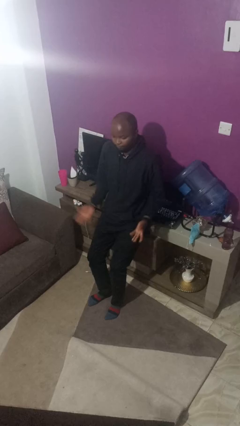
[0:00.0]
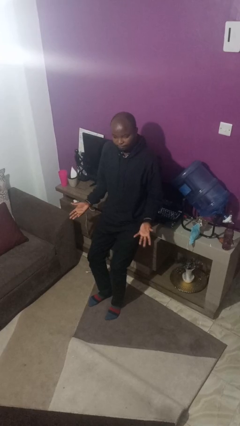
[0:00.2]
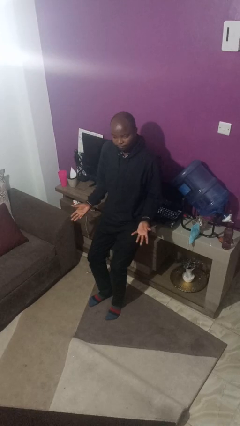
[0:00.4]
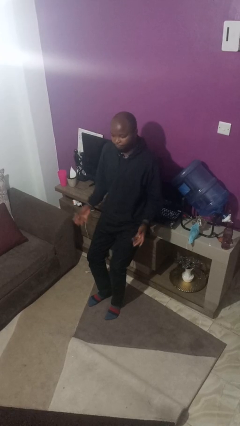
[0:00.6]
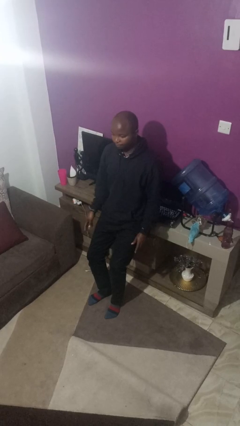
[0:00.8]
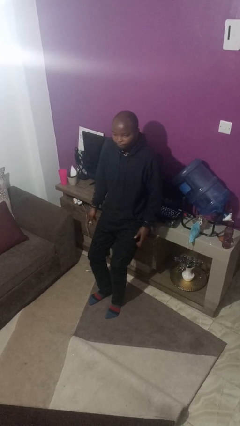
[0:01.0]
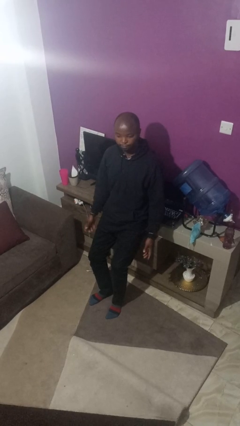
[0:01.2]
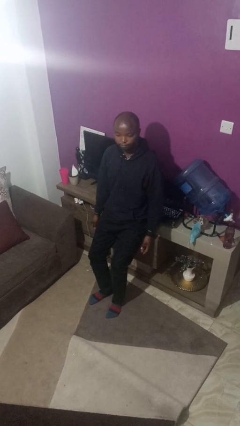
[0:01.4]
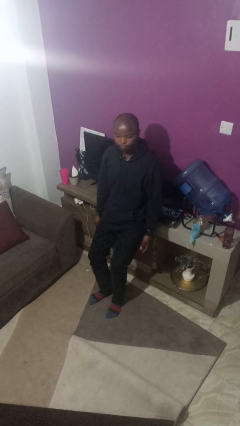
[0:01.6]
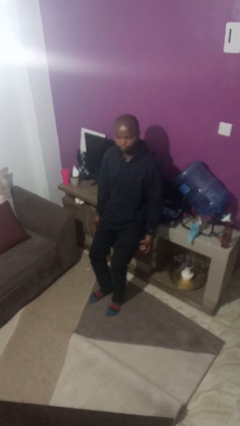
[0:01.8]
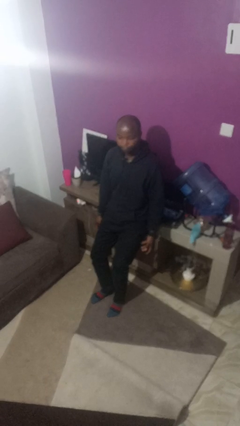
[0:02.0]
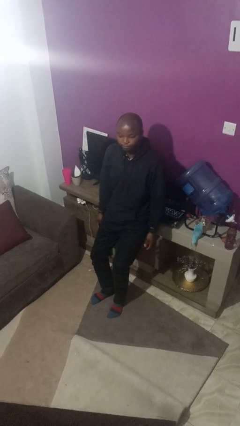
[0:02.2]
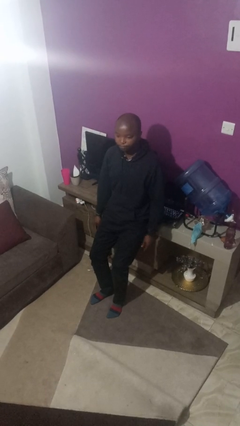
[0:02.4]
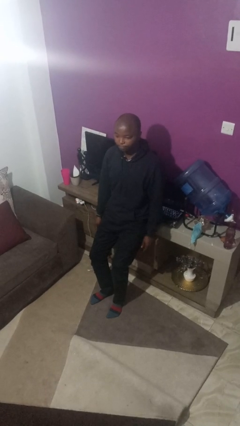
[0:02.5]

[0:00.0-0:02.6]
person shrugs

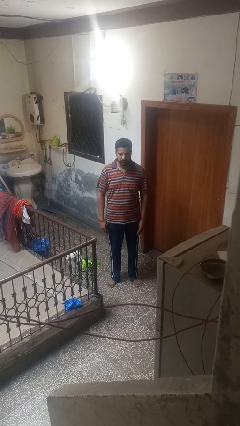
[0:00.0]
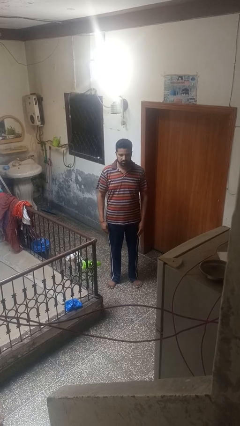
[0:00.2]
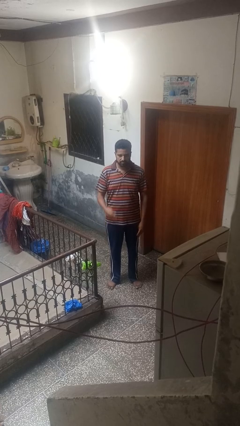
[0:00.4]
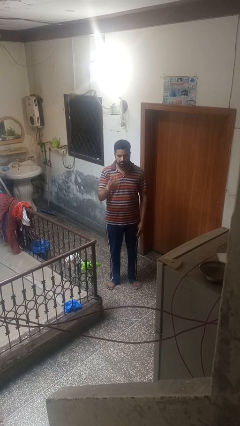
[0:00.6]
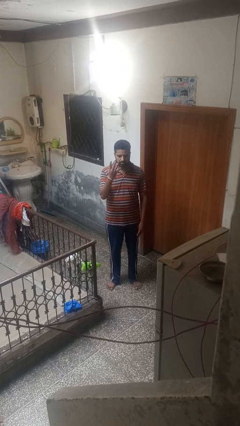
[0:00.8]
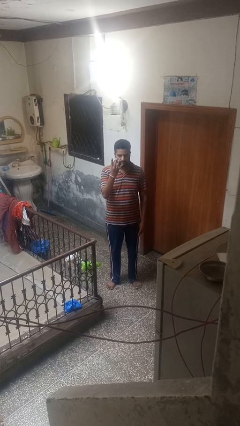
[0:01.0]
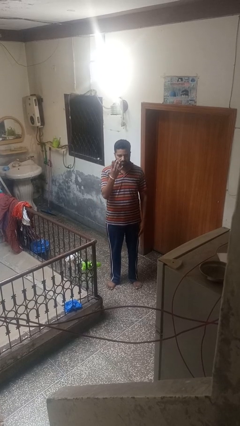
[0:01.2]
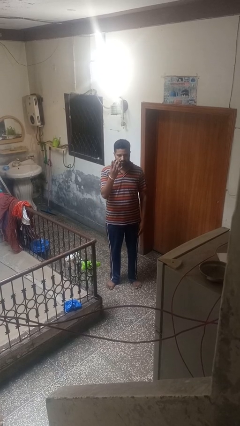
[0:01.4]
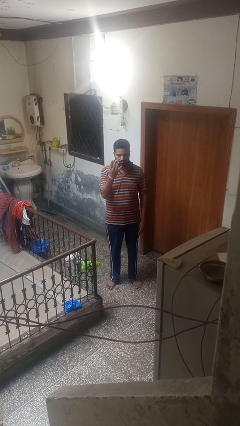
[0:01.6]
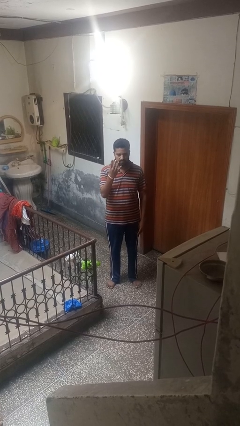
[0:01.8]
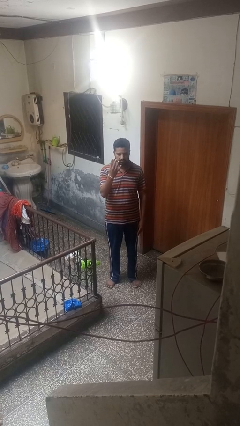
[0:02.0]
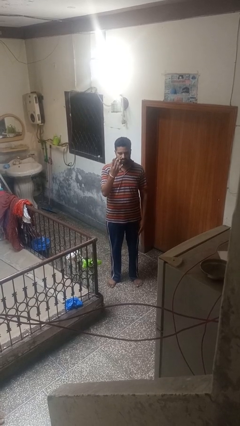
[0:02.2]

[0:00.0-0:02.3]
person gestures number four

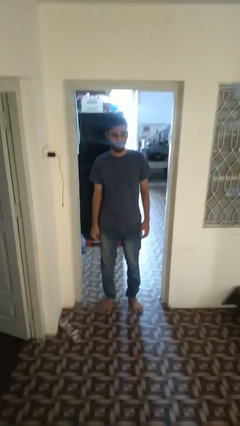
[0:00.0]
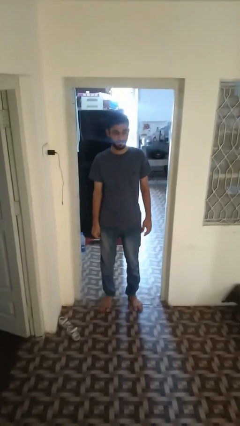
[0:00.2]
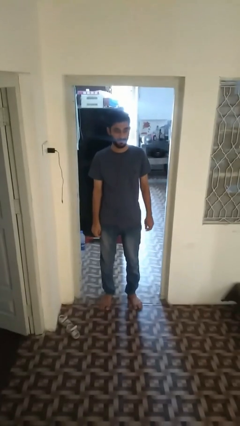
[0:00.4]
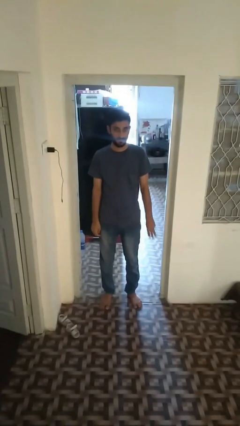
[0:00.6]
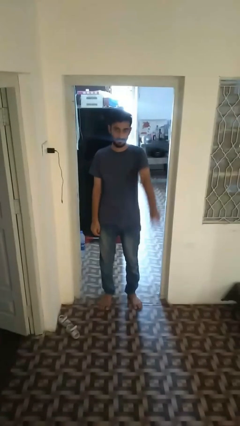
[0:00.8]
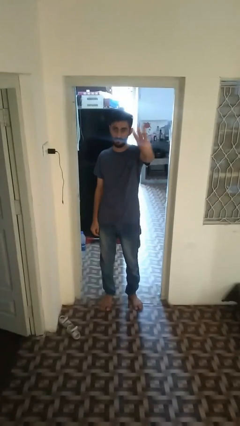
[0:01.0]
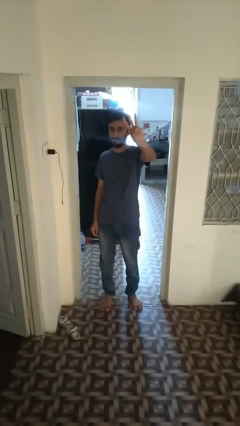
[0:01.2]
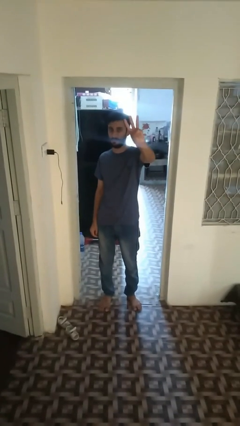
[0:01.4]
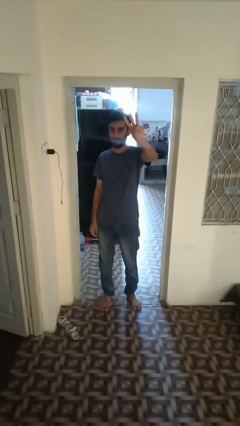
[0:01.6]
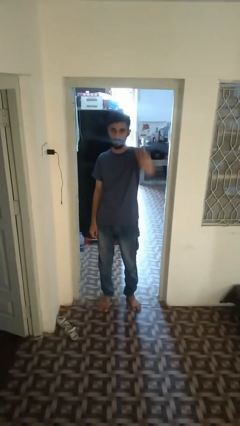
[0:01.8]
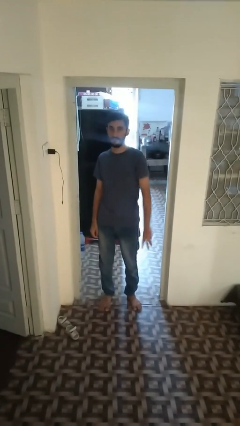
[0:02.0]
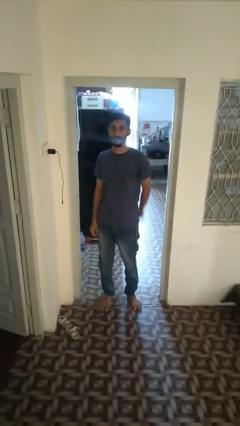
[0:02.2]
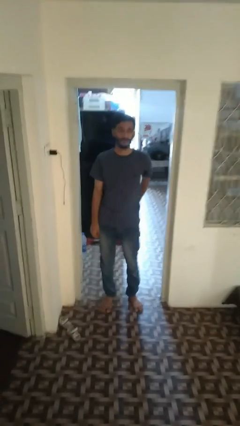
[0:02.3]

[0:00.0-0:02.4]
person gestures number three

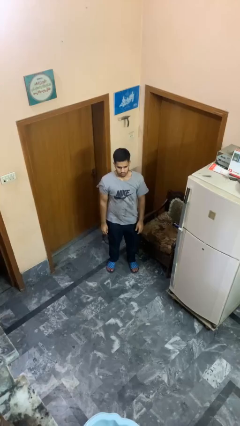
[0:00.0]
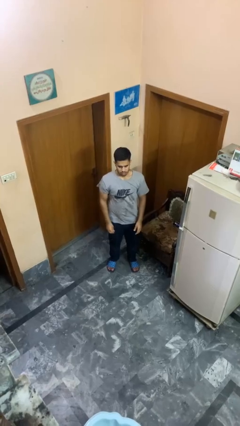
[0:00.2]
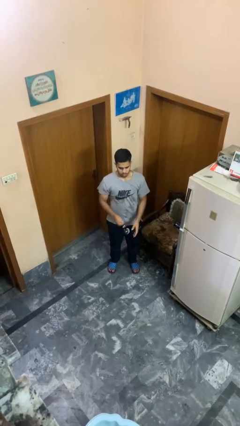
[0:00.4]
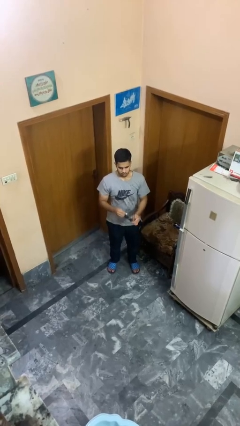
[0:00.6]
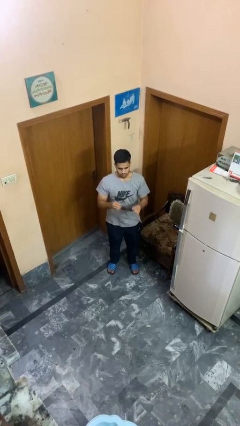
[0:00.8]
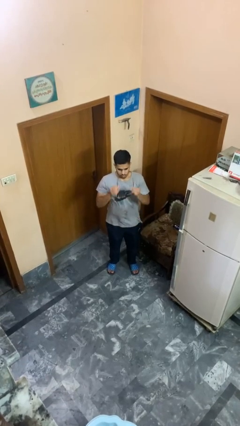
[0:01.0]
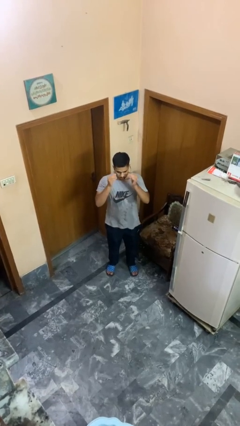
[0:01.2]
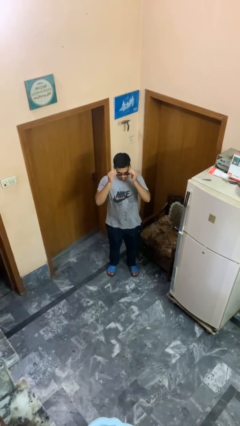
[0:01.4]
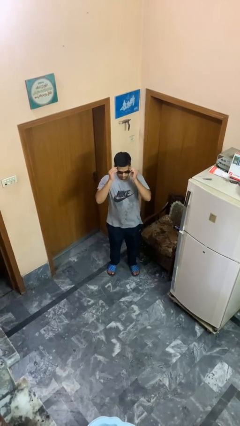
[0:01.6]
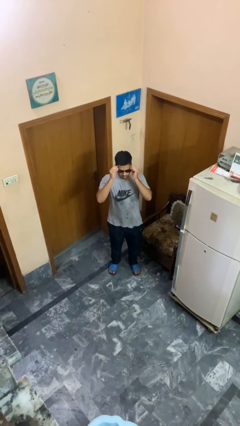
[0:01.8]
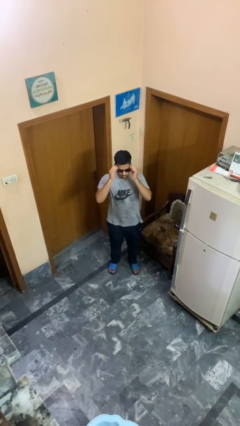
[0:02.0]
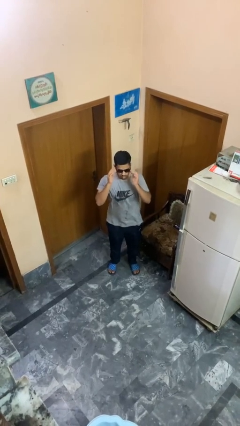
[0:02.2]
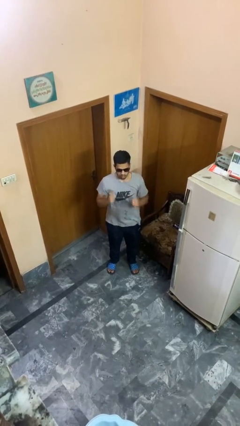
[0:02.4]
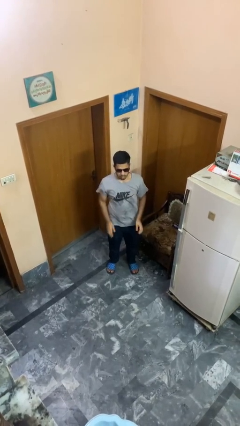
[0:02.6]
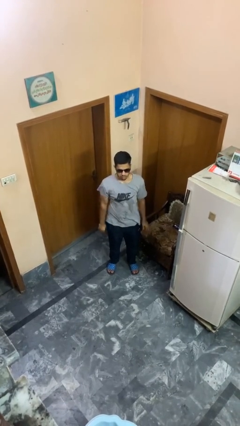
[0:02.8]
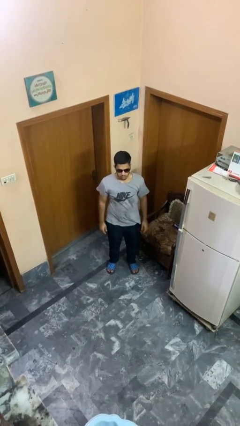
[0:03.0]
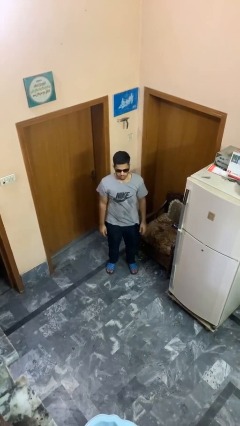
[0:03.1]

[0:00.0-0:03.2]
person puts on sunglasses

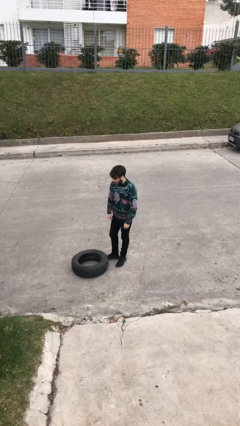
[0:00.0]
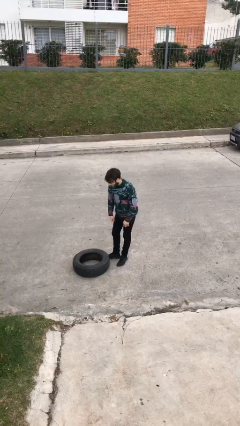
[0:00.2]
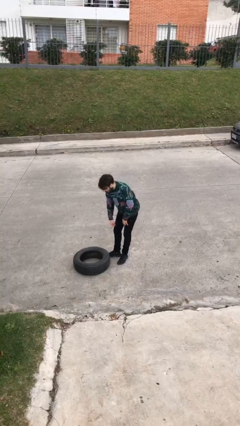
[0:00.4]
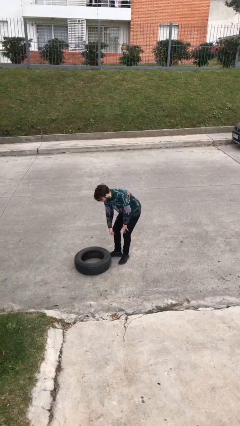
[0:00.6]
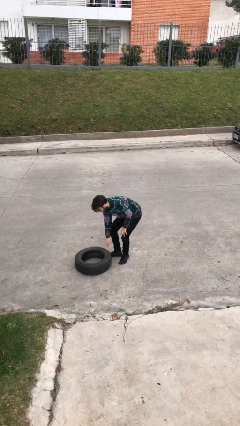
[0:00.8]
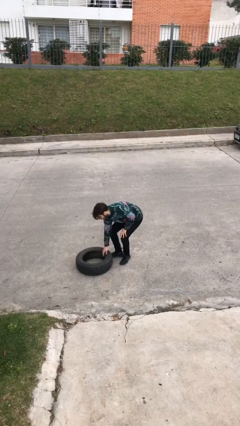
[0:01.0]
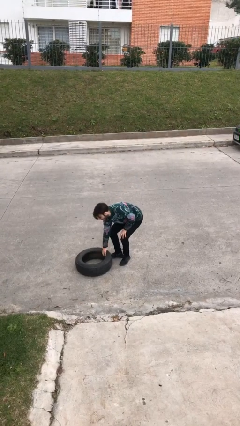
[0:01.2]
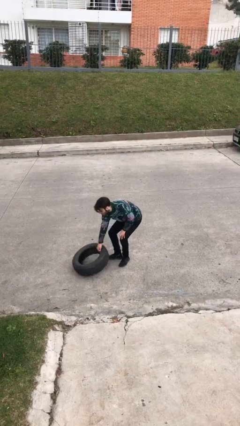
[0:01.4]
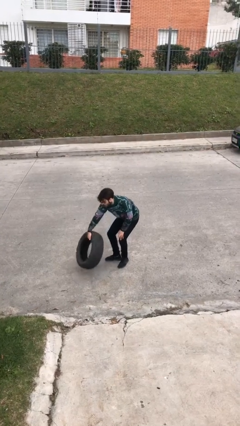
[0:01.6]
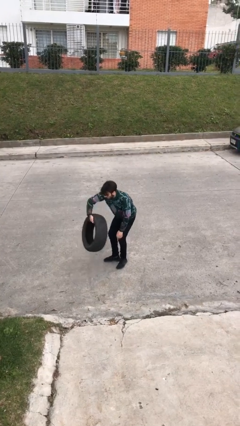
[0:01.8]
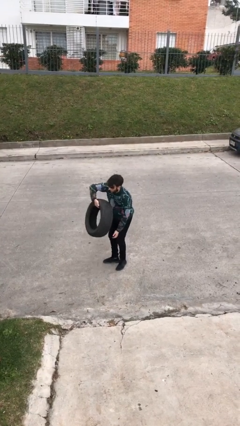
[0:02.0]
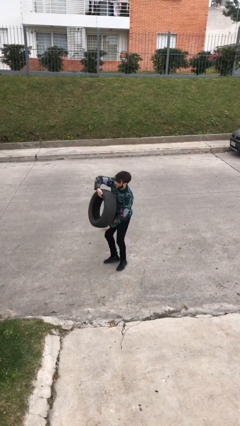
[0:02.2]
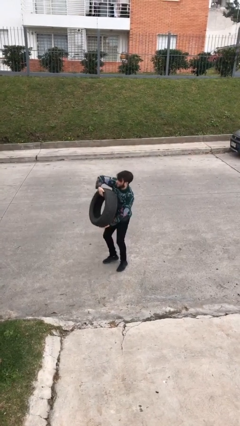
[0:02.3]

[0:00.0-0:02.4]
person picks up object from floor

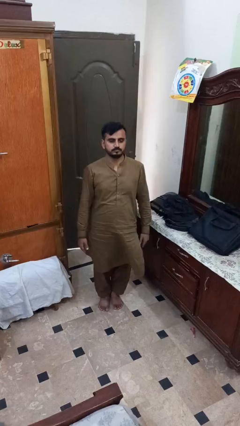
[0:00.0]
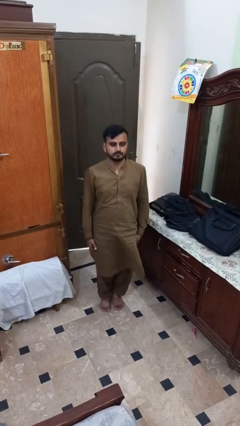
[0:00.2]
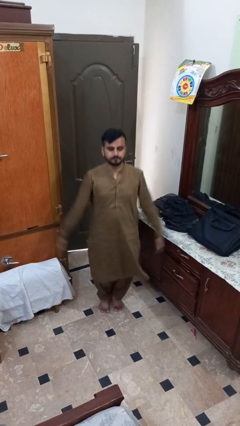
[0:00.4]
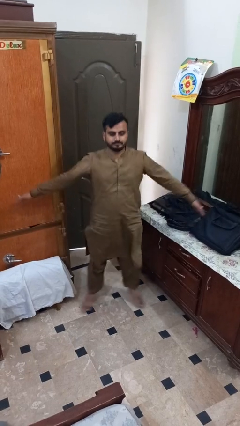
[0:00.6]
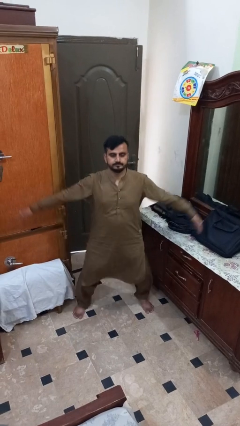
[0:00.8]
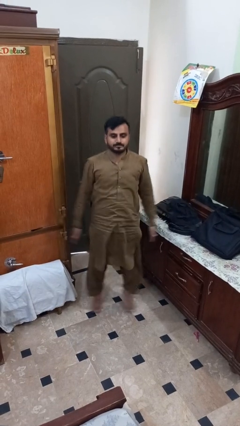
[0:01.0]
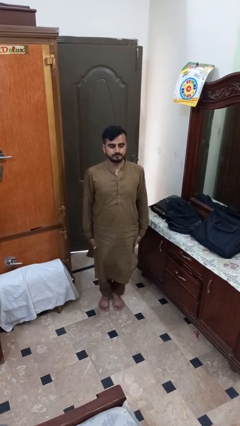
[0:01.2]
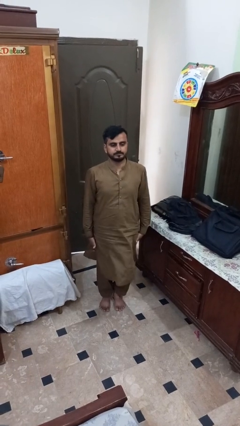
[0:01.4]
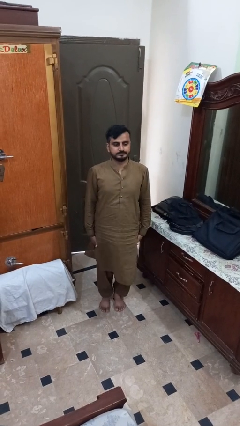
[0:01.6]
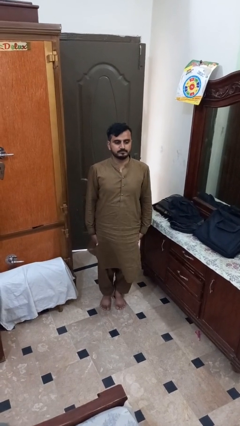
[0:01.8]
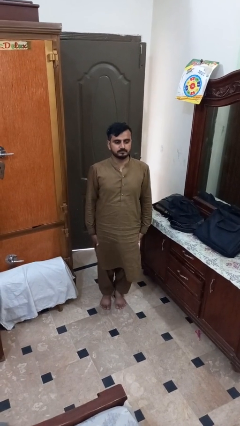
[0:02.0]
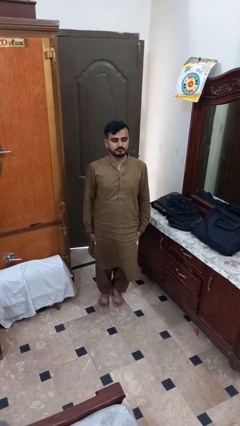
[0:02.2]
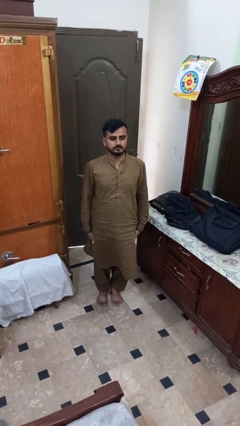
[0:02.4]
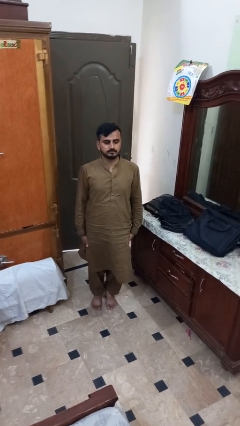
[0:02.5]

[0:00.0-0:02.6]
person exercises with jumping jacks

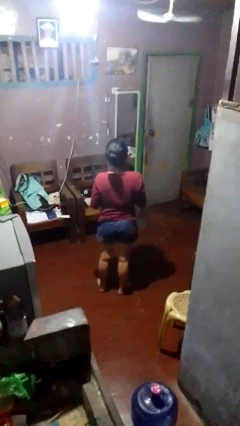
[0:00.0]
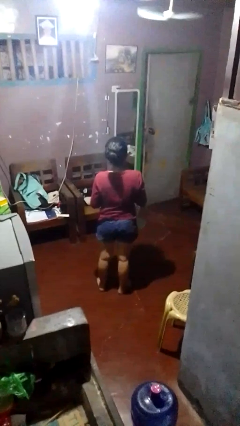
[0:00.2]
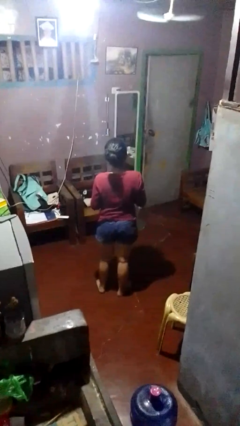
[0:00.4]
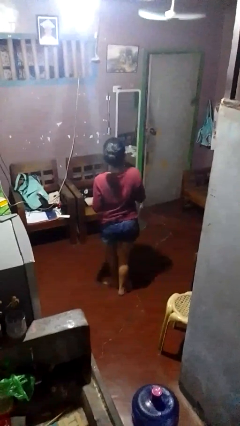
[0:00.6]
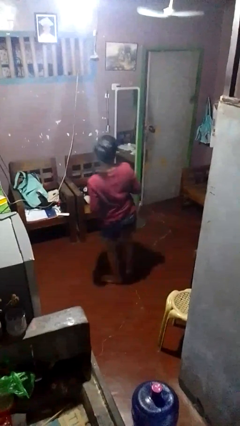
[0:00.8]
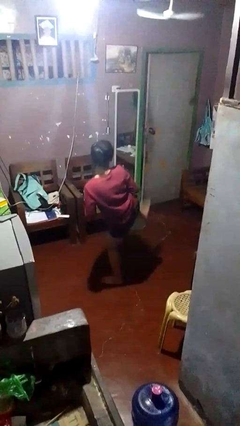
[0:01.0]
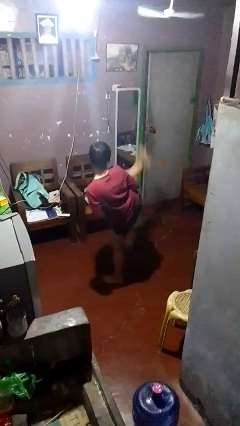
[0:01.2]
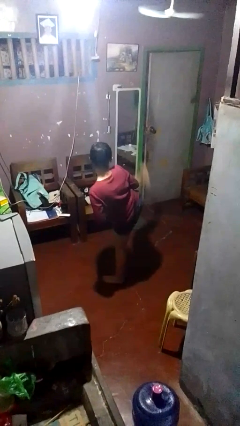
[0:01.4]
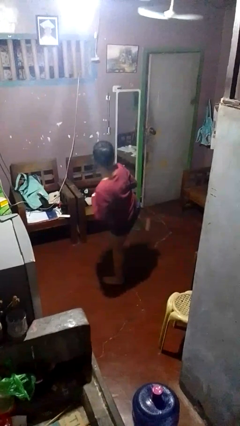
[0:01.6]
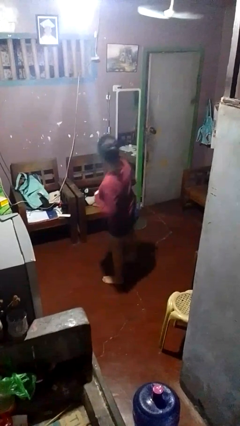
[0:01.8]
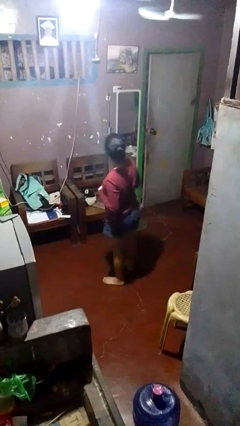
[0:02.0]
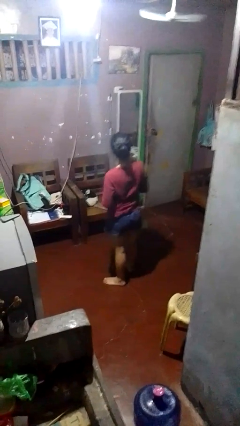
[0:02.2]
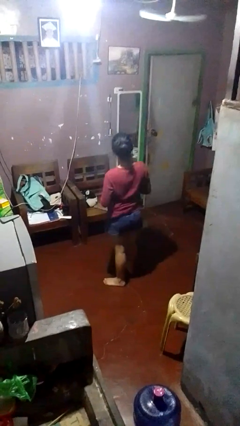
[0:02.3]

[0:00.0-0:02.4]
person karate kicks
